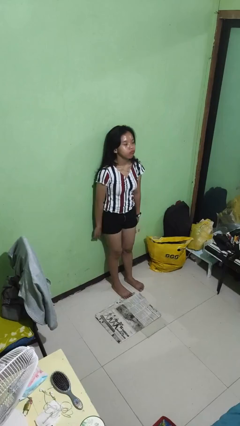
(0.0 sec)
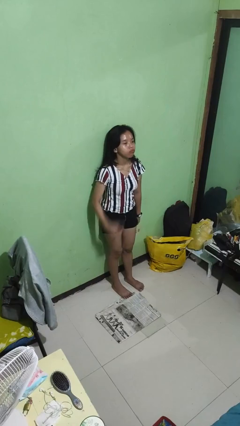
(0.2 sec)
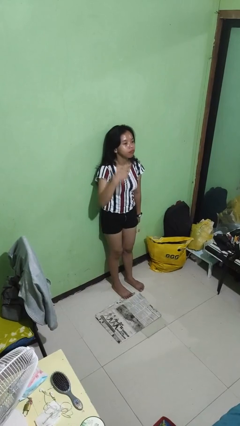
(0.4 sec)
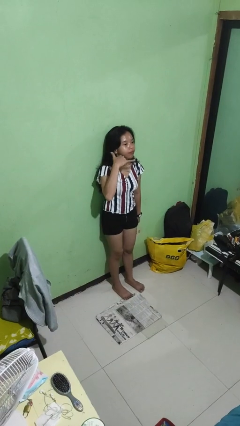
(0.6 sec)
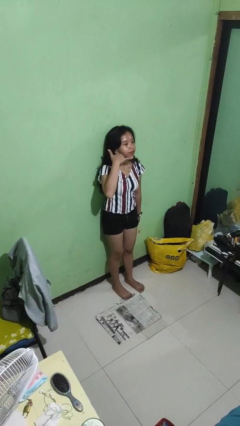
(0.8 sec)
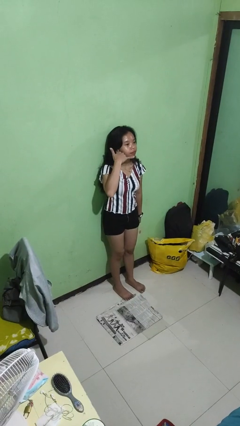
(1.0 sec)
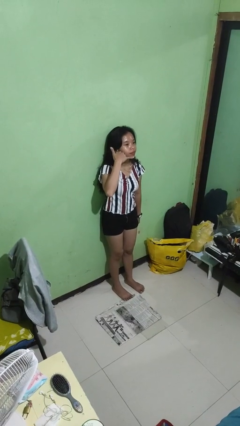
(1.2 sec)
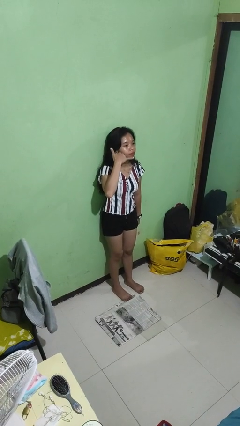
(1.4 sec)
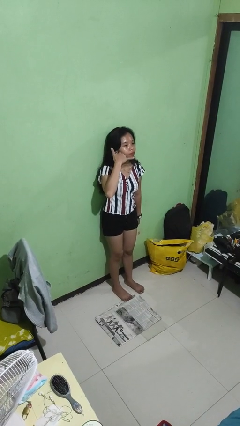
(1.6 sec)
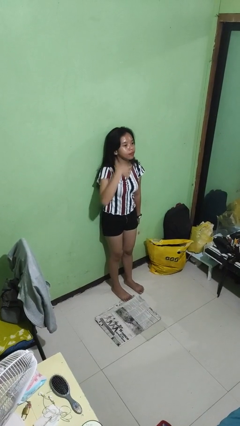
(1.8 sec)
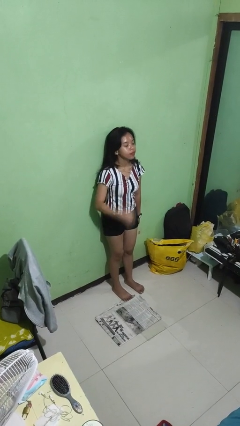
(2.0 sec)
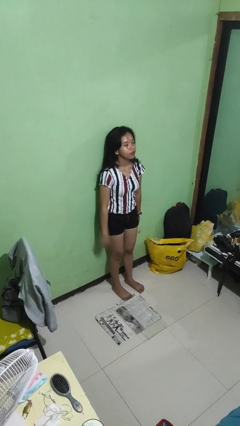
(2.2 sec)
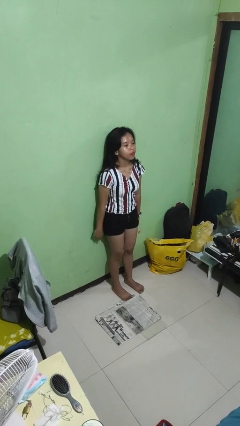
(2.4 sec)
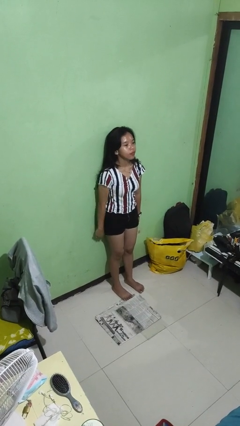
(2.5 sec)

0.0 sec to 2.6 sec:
person throws object into air

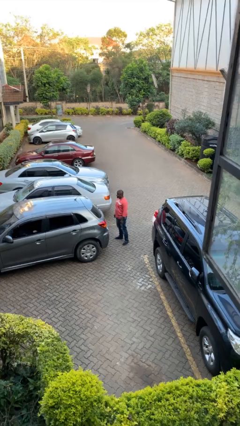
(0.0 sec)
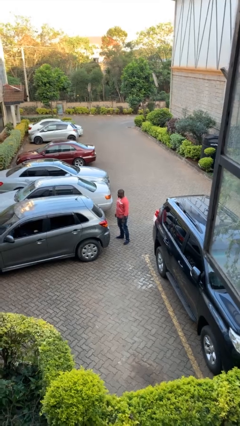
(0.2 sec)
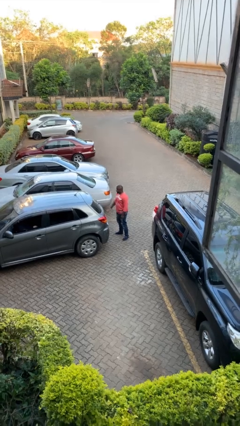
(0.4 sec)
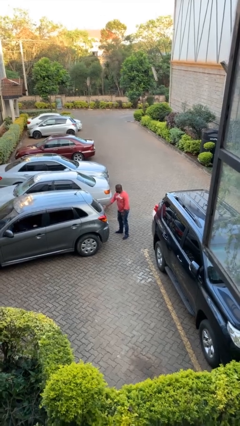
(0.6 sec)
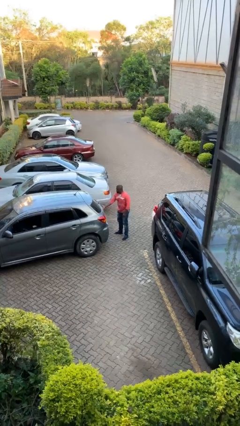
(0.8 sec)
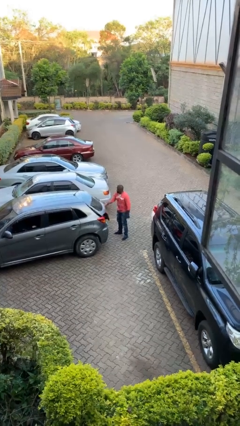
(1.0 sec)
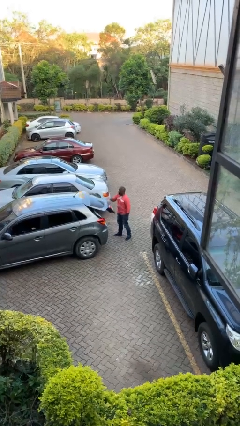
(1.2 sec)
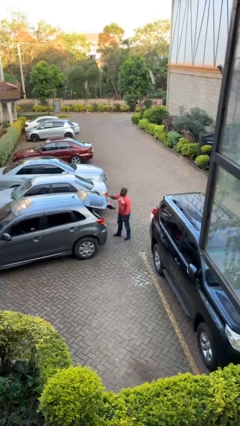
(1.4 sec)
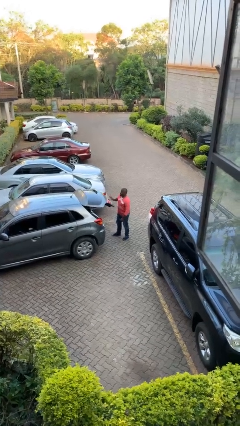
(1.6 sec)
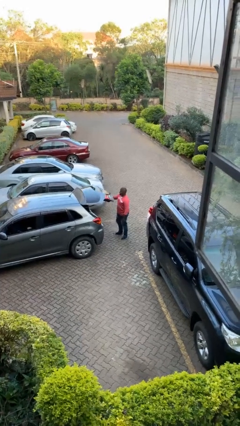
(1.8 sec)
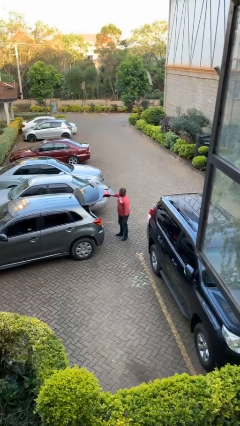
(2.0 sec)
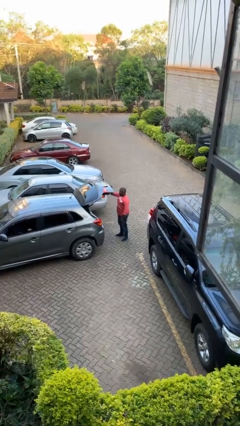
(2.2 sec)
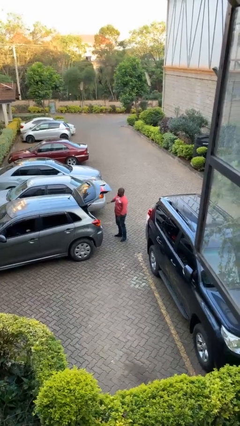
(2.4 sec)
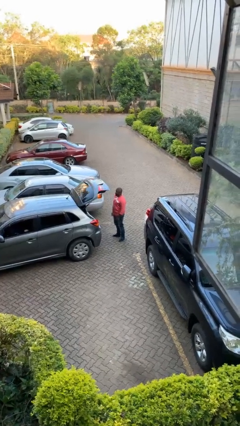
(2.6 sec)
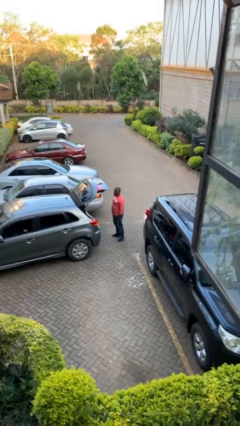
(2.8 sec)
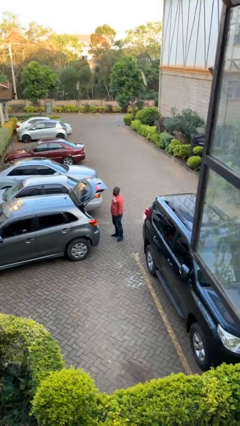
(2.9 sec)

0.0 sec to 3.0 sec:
person opens car trunk

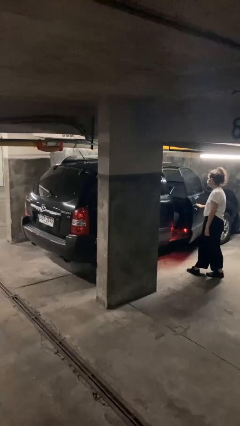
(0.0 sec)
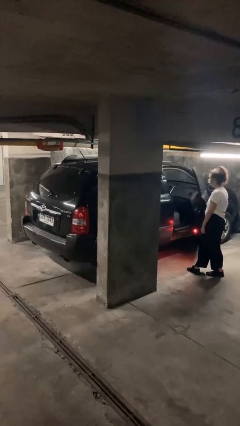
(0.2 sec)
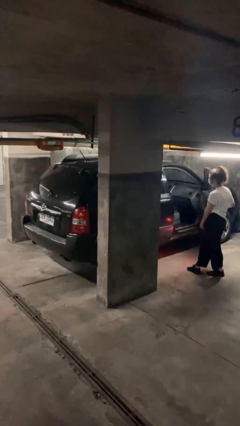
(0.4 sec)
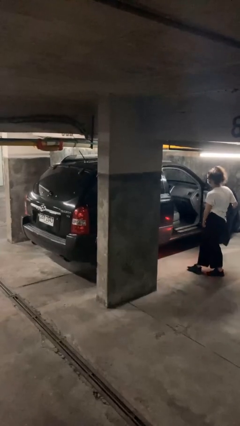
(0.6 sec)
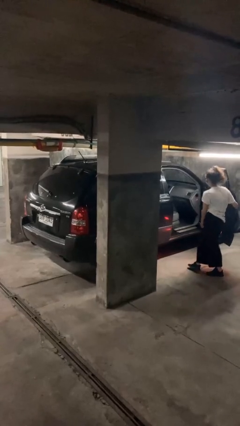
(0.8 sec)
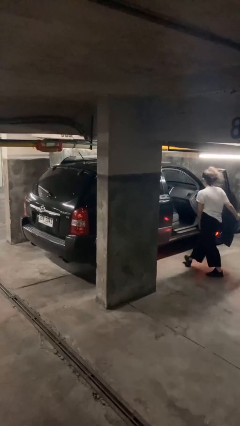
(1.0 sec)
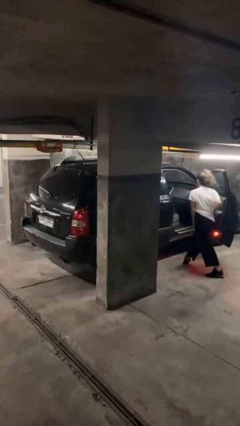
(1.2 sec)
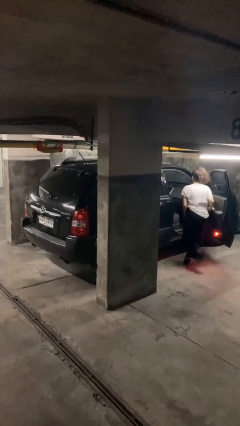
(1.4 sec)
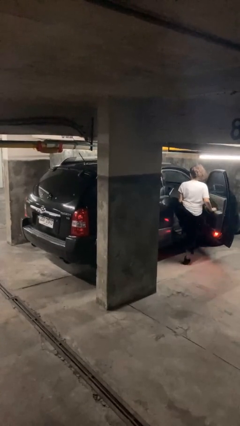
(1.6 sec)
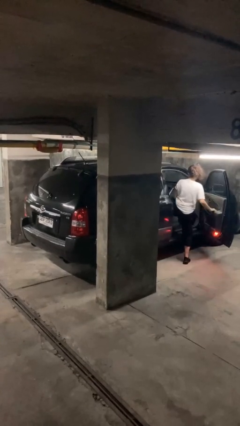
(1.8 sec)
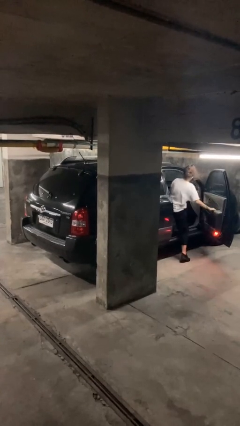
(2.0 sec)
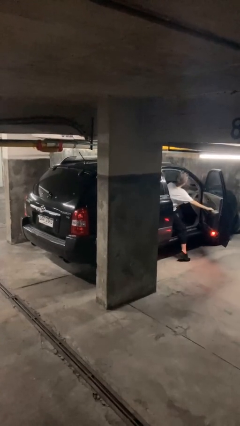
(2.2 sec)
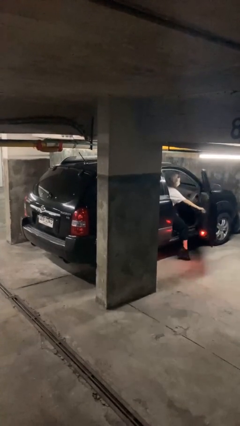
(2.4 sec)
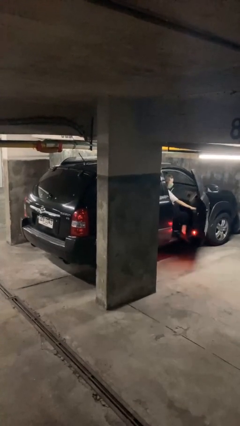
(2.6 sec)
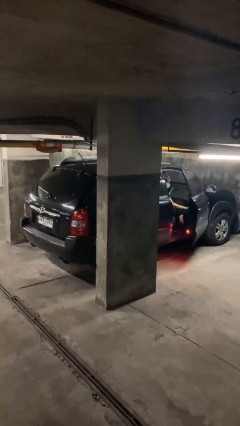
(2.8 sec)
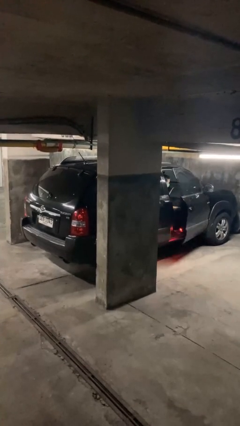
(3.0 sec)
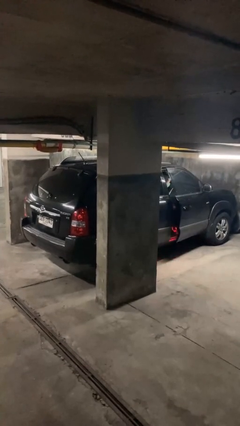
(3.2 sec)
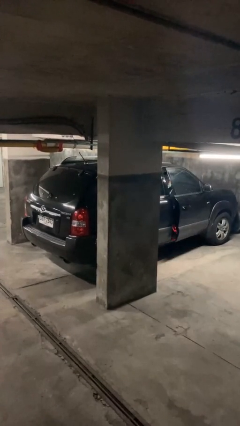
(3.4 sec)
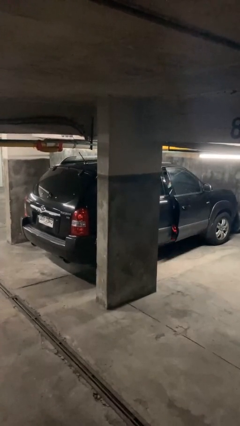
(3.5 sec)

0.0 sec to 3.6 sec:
car picks up person

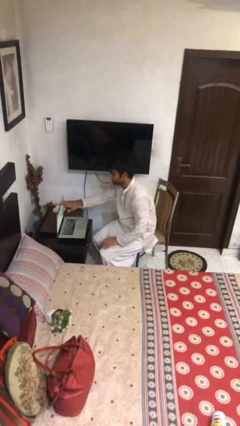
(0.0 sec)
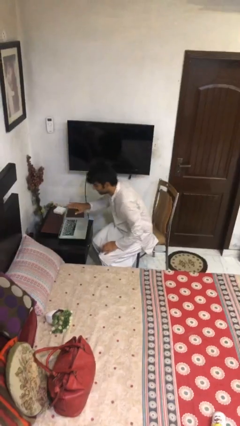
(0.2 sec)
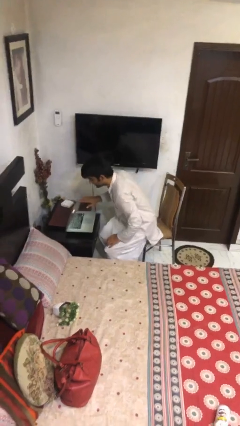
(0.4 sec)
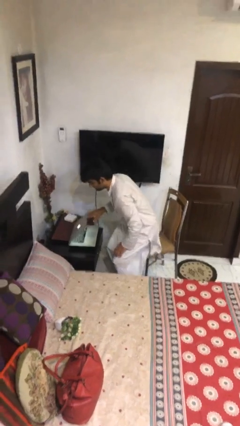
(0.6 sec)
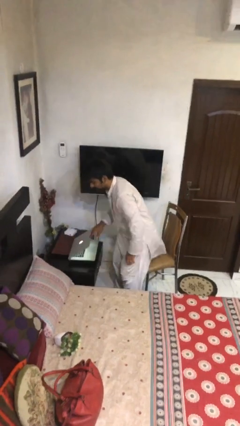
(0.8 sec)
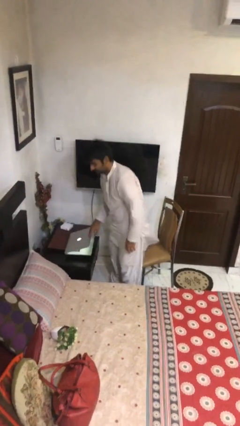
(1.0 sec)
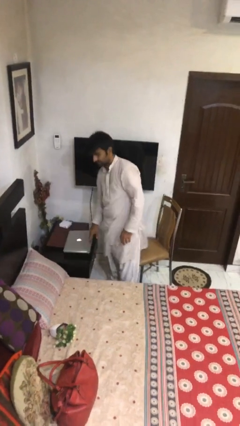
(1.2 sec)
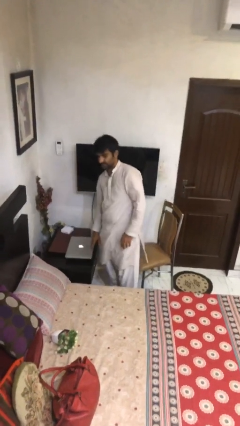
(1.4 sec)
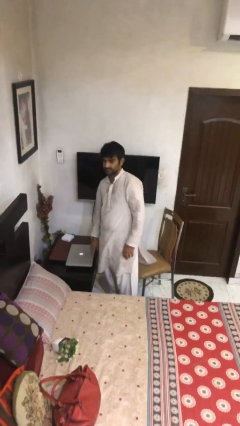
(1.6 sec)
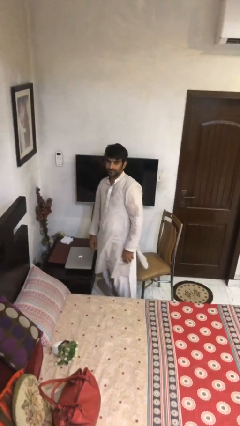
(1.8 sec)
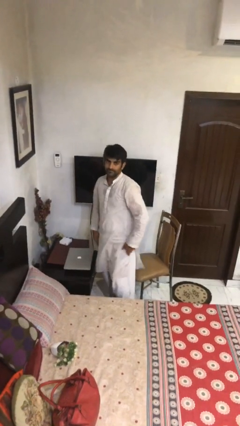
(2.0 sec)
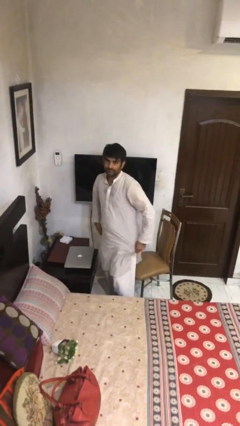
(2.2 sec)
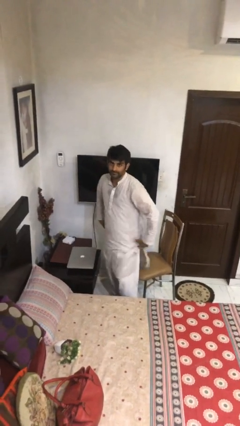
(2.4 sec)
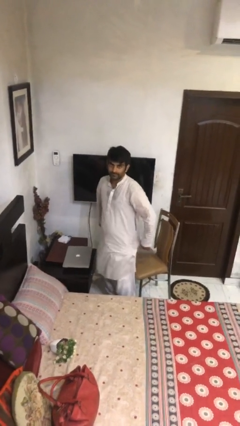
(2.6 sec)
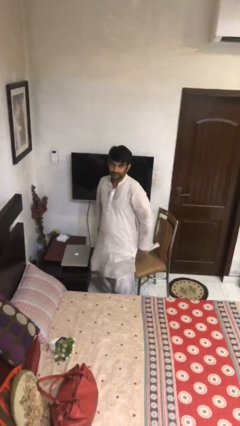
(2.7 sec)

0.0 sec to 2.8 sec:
person stands up

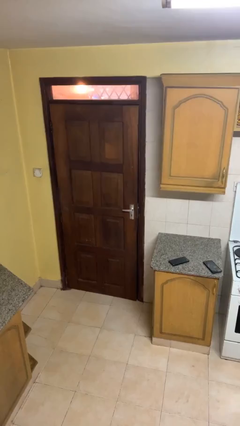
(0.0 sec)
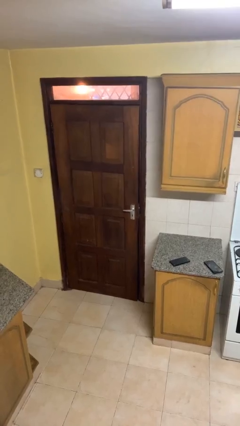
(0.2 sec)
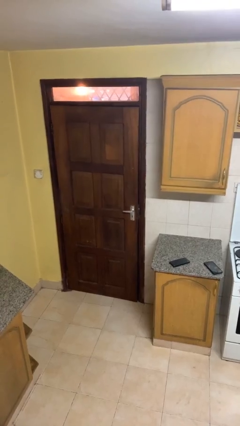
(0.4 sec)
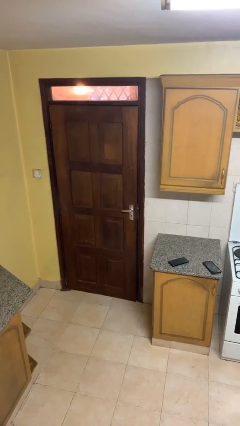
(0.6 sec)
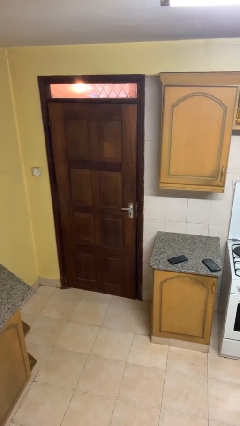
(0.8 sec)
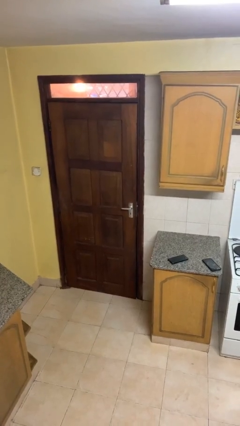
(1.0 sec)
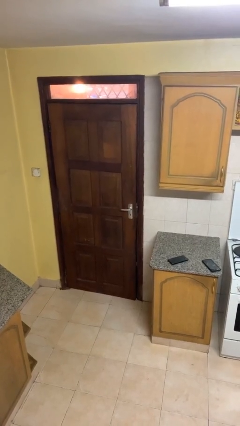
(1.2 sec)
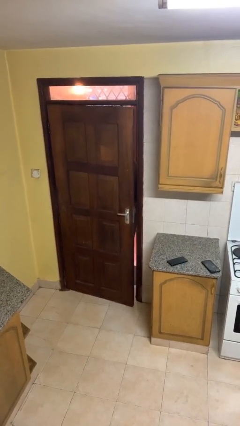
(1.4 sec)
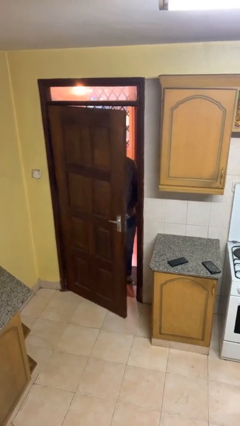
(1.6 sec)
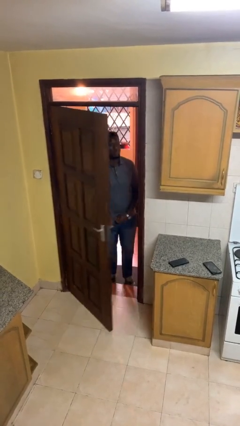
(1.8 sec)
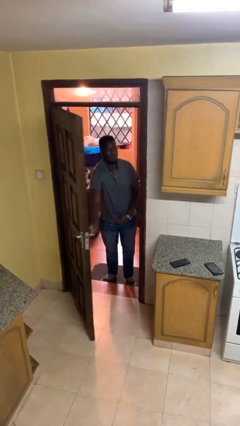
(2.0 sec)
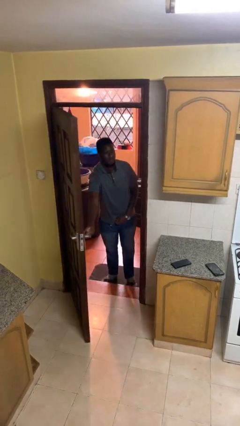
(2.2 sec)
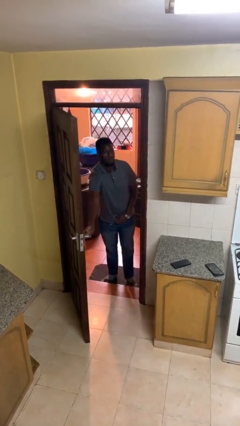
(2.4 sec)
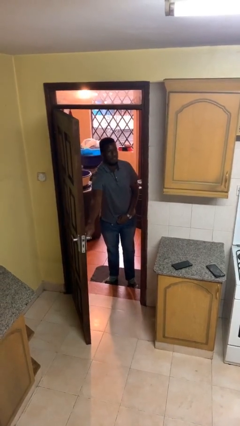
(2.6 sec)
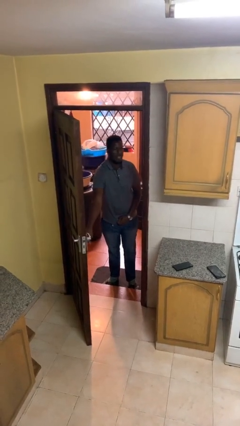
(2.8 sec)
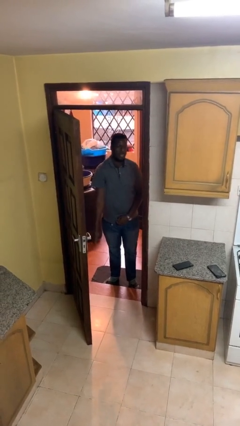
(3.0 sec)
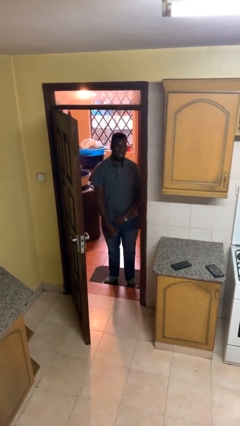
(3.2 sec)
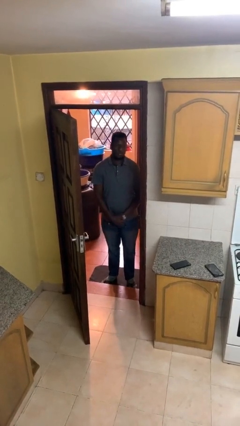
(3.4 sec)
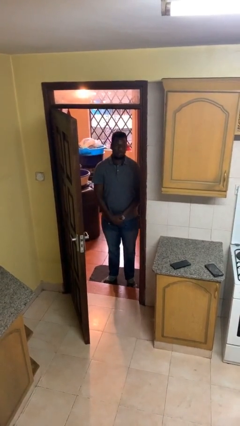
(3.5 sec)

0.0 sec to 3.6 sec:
person opens facility door

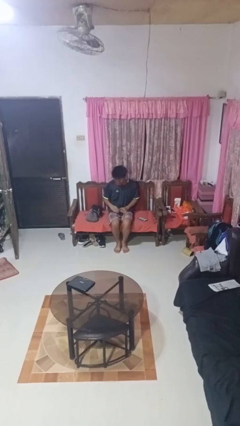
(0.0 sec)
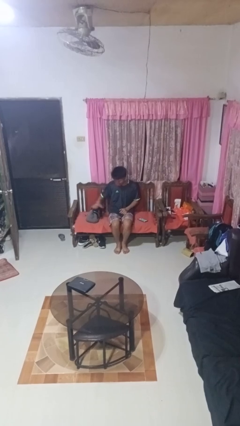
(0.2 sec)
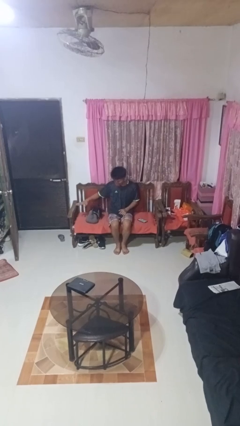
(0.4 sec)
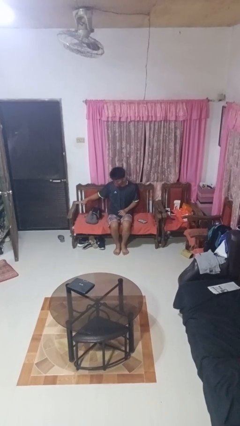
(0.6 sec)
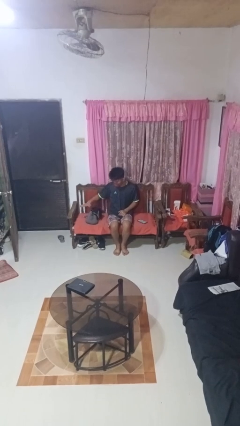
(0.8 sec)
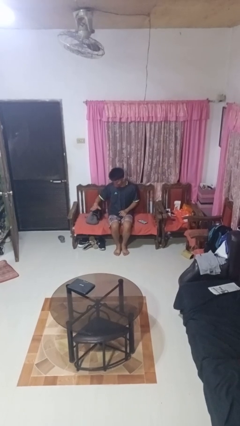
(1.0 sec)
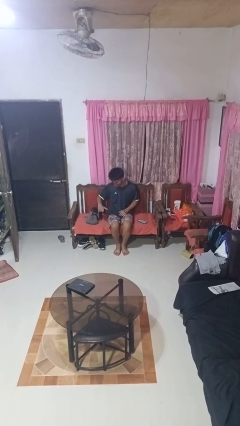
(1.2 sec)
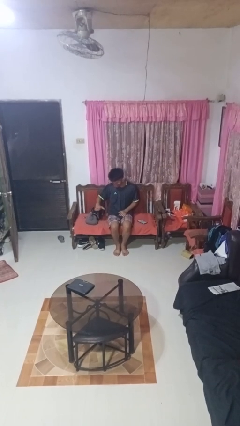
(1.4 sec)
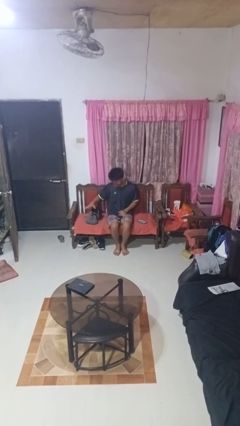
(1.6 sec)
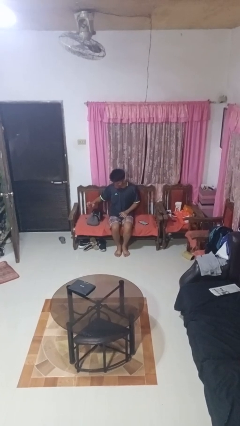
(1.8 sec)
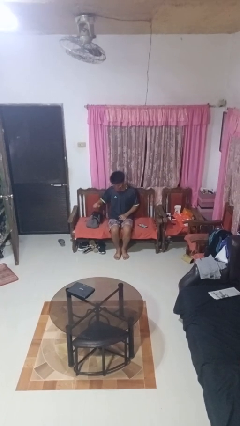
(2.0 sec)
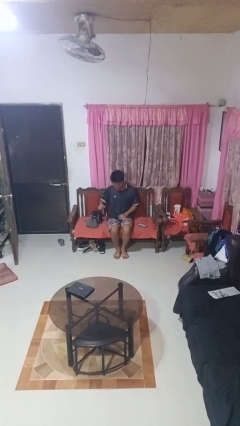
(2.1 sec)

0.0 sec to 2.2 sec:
person waves hand over object
